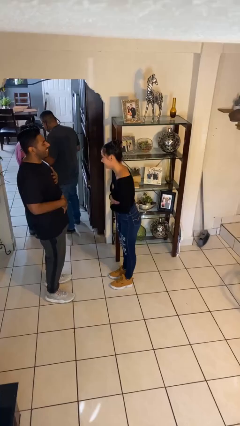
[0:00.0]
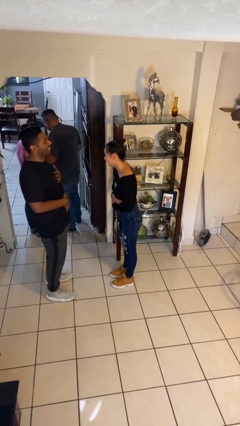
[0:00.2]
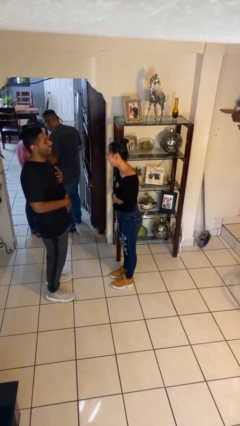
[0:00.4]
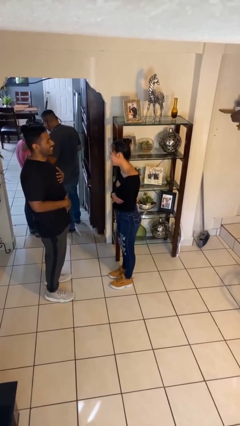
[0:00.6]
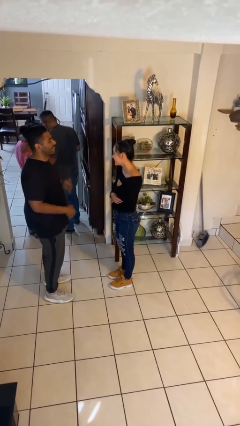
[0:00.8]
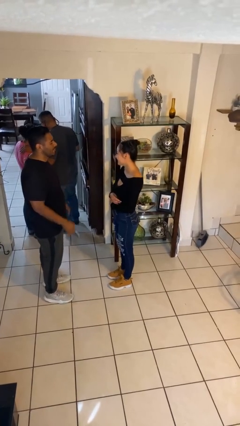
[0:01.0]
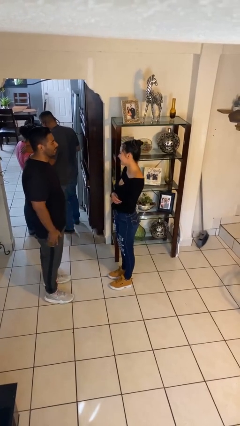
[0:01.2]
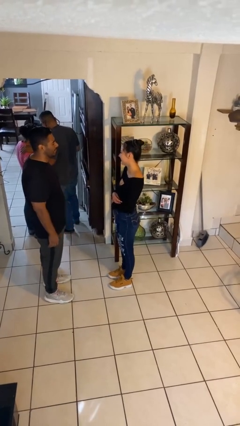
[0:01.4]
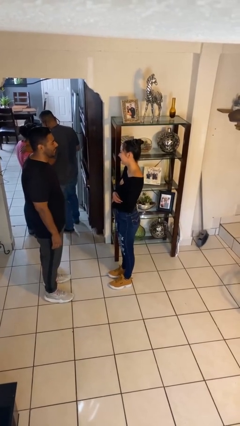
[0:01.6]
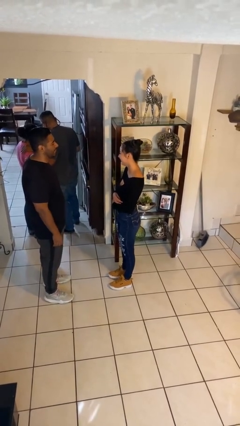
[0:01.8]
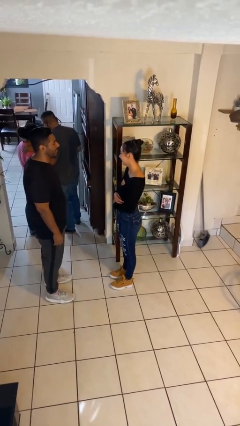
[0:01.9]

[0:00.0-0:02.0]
person laughs with person

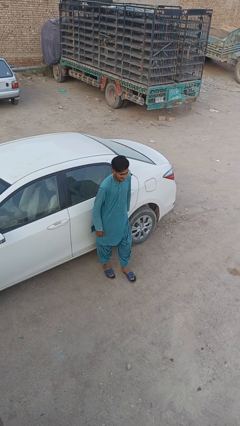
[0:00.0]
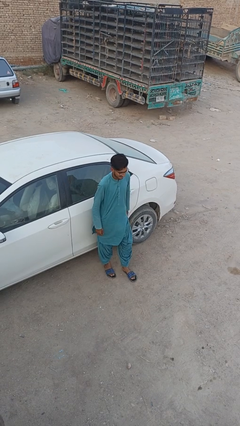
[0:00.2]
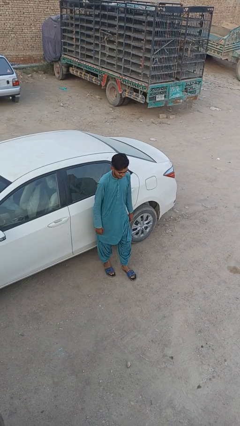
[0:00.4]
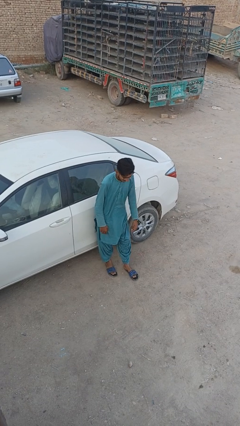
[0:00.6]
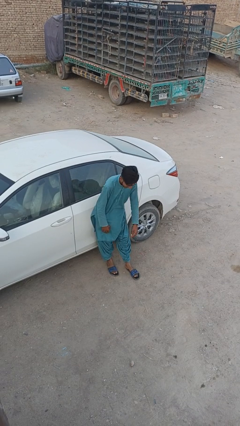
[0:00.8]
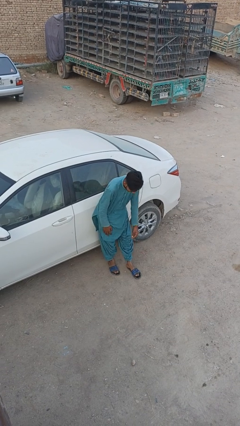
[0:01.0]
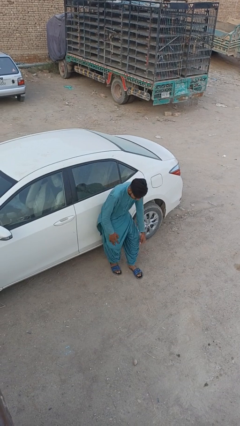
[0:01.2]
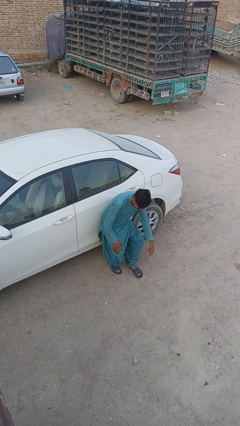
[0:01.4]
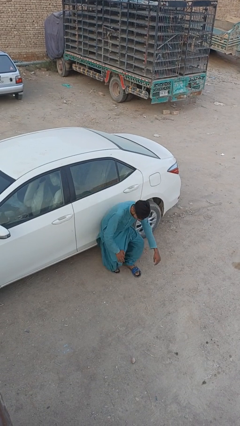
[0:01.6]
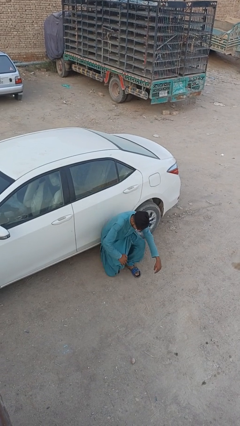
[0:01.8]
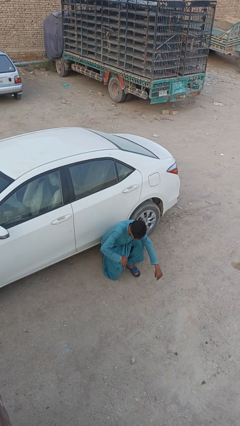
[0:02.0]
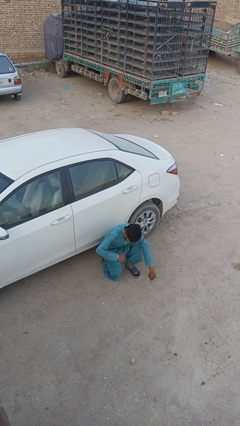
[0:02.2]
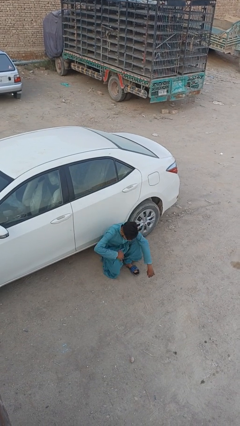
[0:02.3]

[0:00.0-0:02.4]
person leans against car

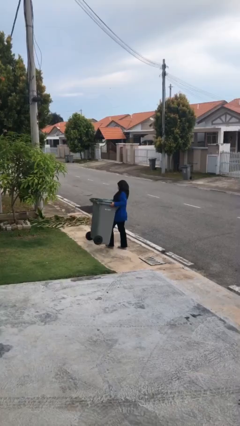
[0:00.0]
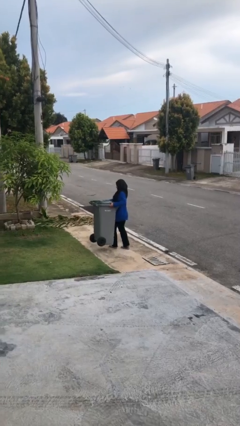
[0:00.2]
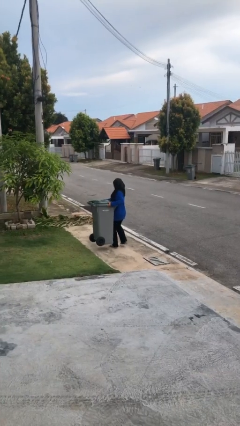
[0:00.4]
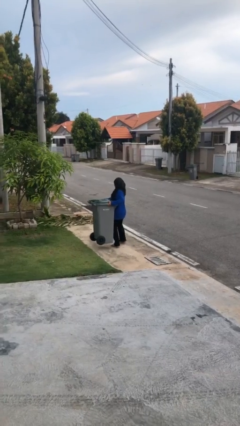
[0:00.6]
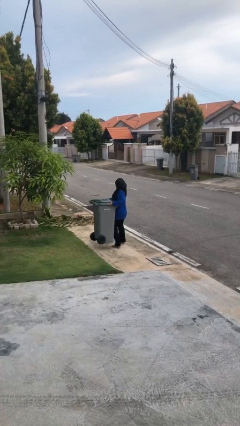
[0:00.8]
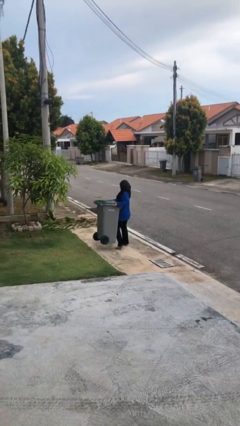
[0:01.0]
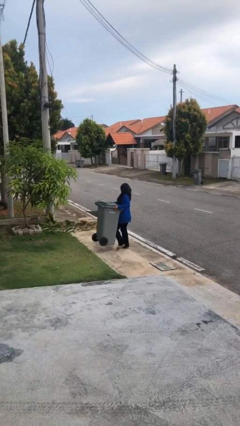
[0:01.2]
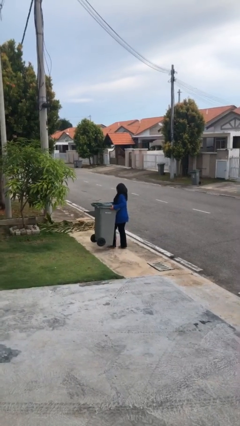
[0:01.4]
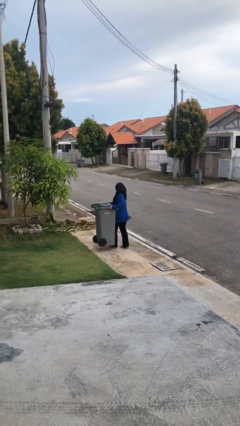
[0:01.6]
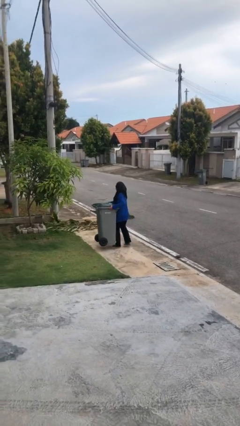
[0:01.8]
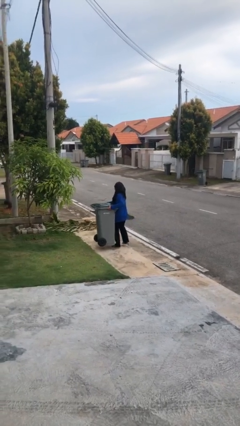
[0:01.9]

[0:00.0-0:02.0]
person carries heavy object

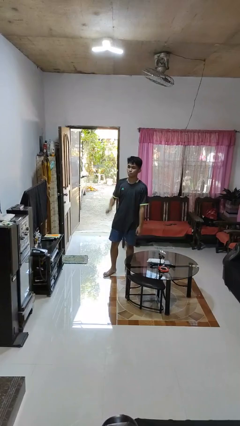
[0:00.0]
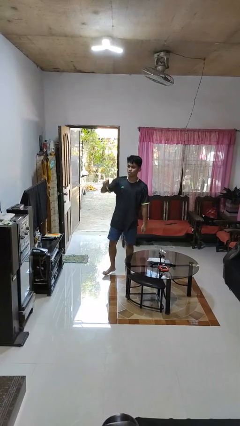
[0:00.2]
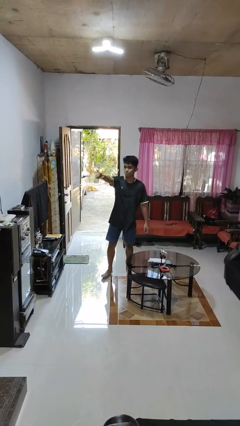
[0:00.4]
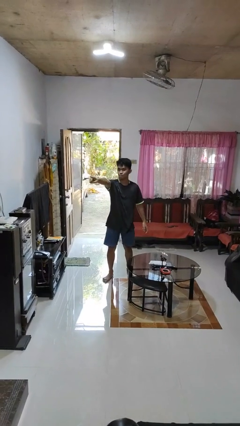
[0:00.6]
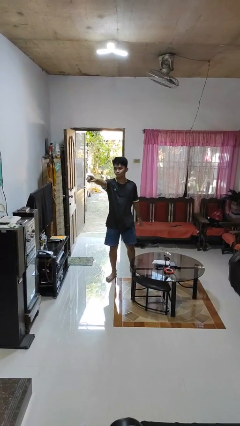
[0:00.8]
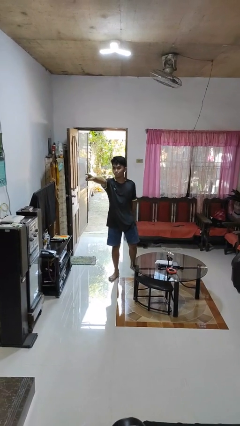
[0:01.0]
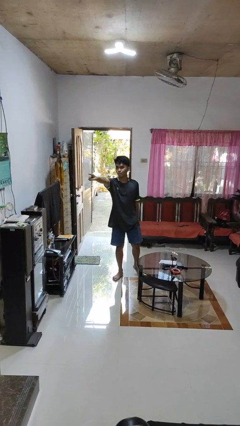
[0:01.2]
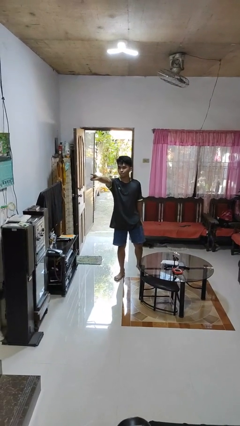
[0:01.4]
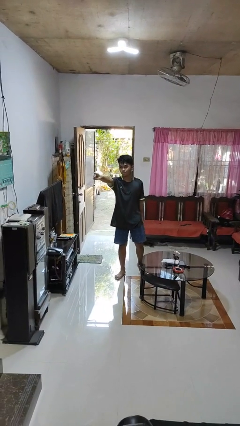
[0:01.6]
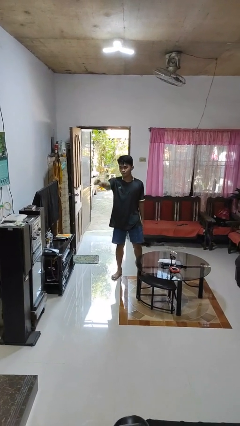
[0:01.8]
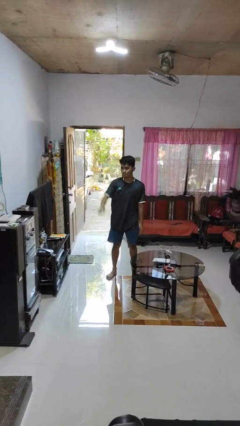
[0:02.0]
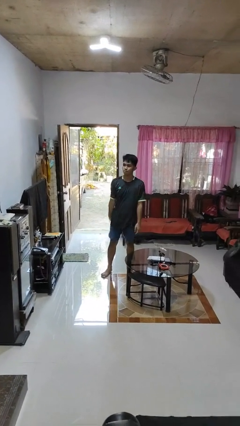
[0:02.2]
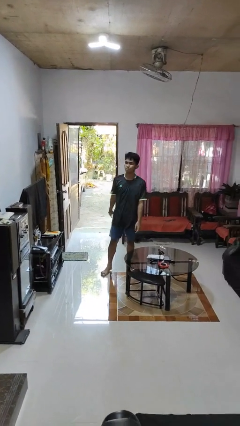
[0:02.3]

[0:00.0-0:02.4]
person points at person

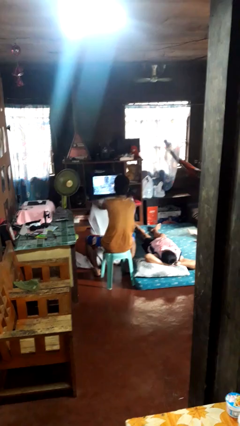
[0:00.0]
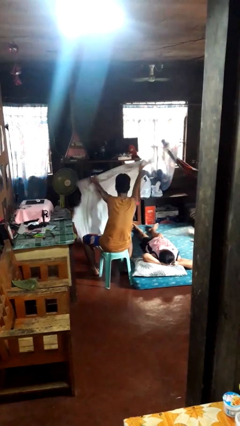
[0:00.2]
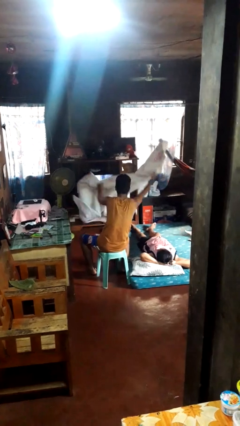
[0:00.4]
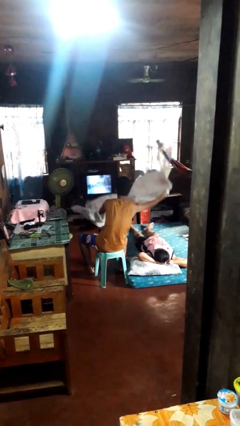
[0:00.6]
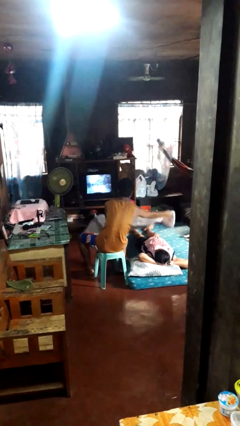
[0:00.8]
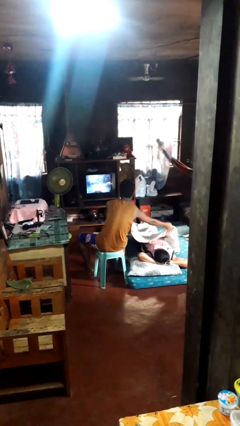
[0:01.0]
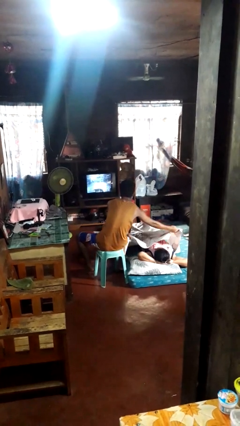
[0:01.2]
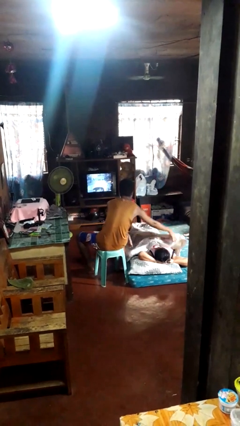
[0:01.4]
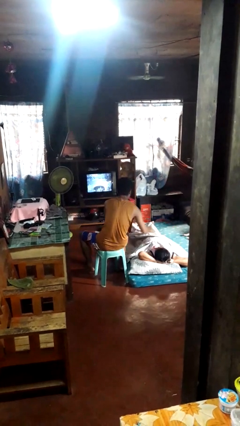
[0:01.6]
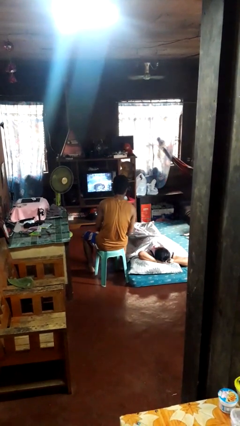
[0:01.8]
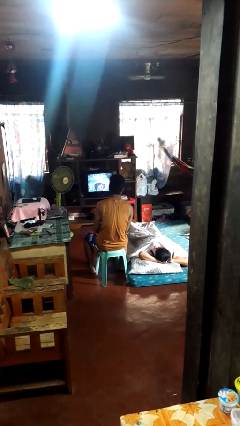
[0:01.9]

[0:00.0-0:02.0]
person covers friend with blanket

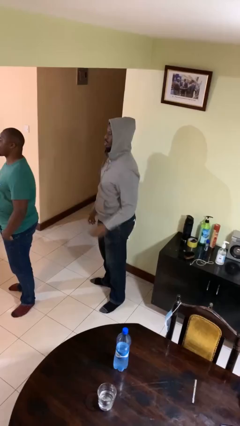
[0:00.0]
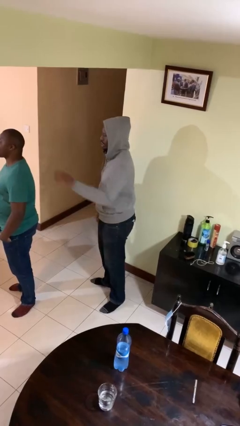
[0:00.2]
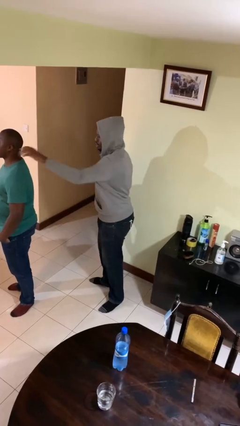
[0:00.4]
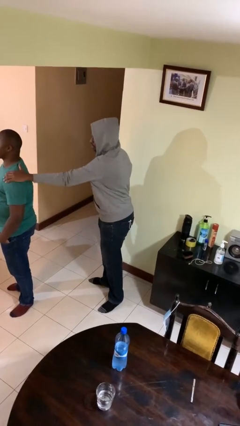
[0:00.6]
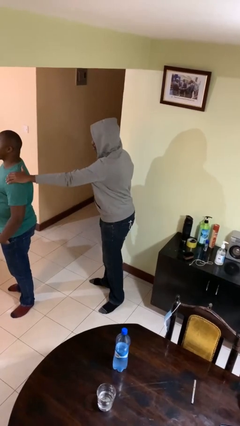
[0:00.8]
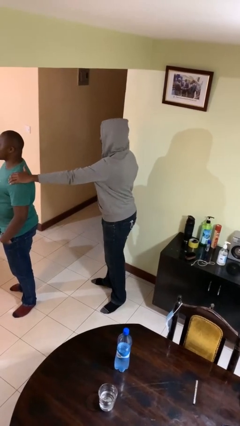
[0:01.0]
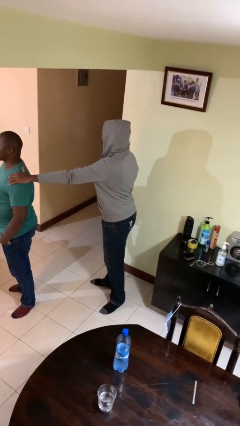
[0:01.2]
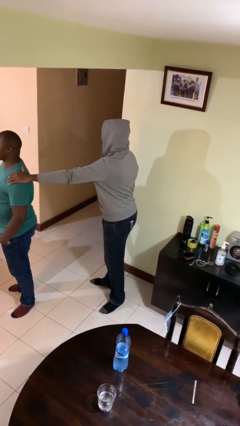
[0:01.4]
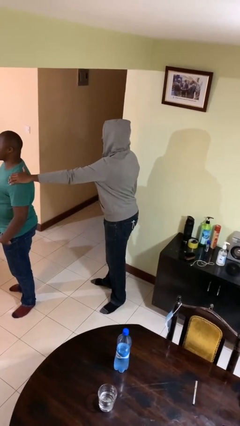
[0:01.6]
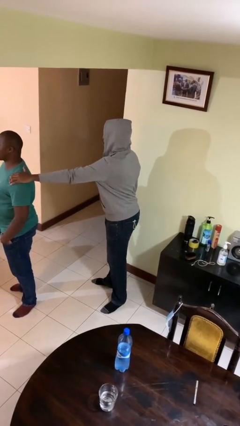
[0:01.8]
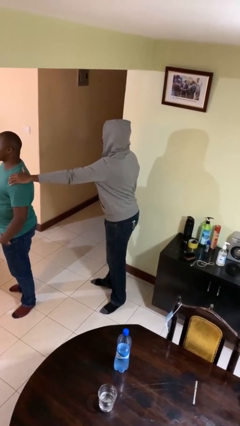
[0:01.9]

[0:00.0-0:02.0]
person grabs person by shoulder

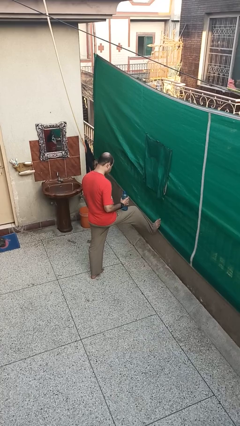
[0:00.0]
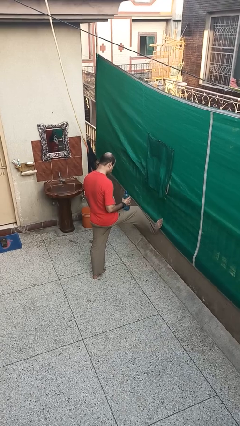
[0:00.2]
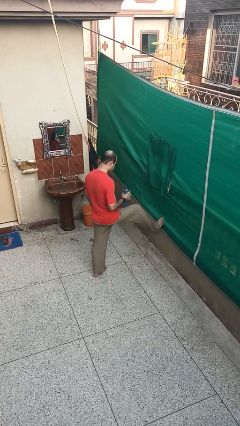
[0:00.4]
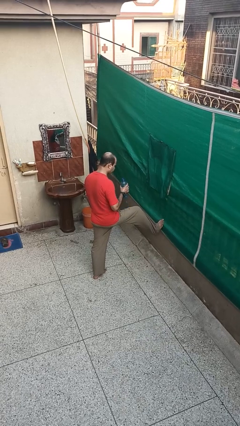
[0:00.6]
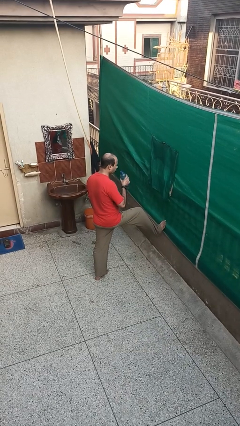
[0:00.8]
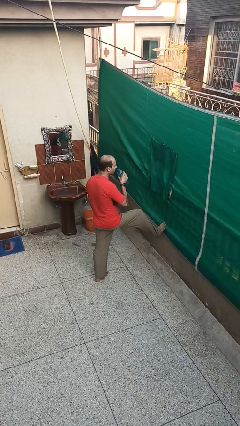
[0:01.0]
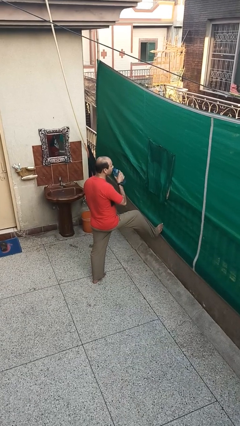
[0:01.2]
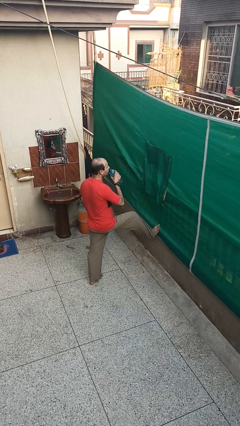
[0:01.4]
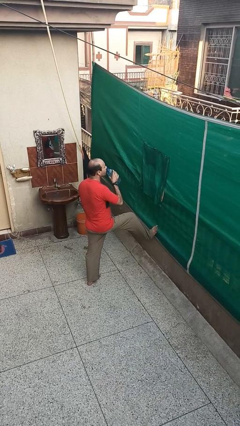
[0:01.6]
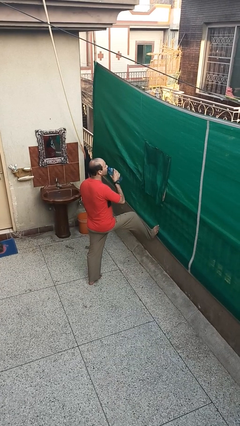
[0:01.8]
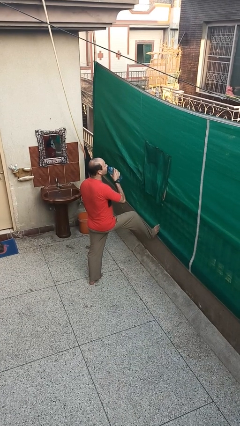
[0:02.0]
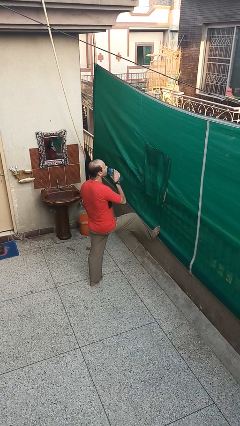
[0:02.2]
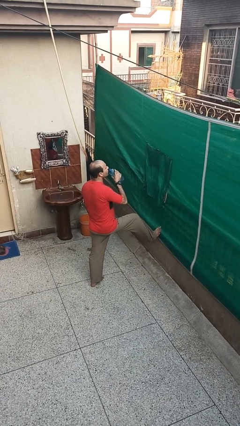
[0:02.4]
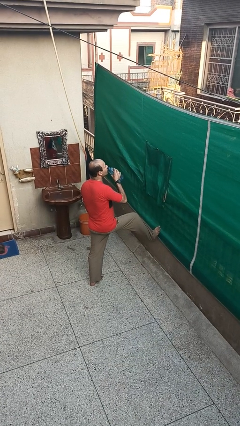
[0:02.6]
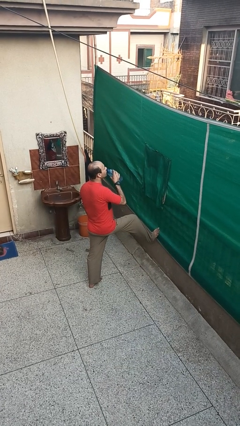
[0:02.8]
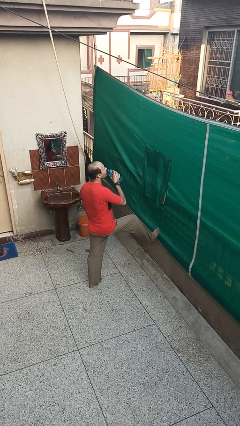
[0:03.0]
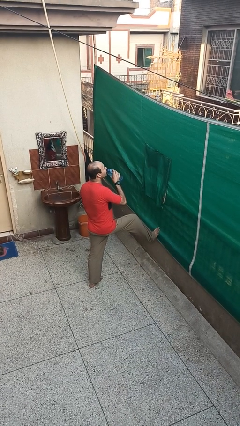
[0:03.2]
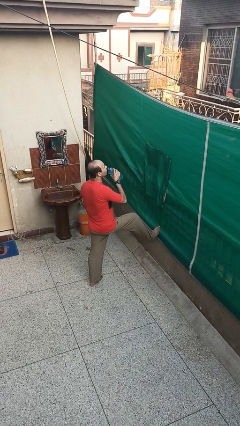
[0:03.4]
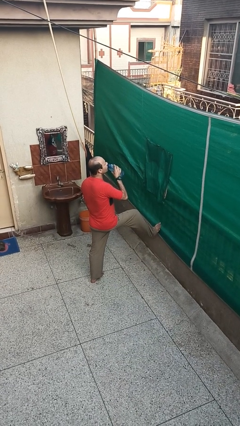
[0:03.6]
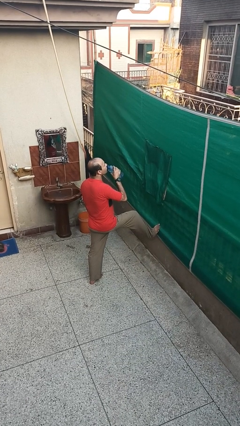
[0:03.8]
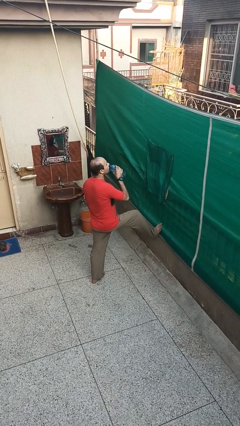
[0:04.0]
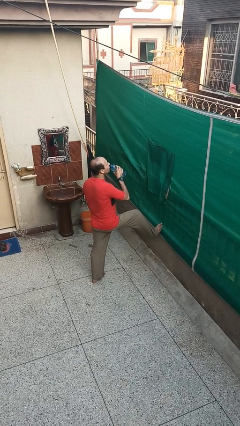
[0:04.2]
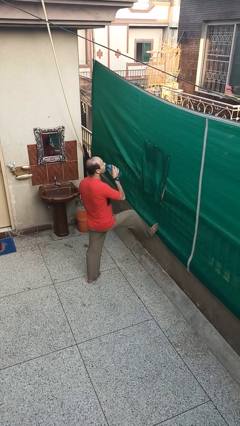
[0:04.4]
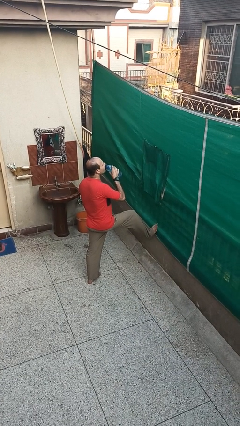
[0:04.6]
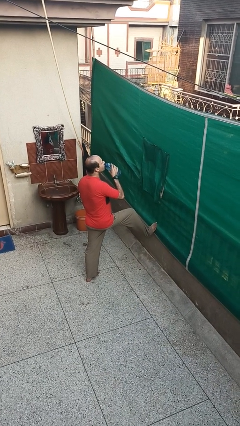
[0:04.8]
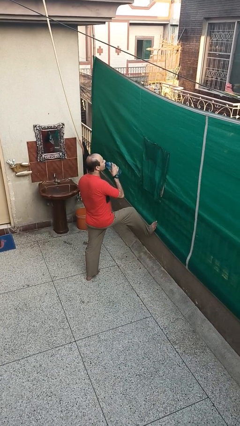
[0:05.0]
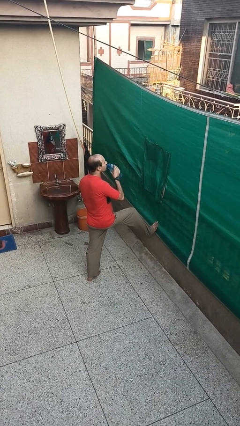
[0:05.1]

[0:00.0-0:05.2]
person drinks from bottle
